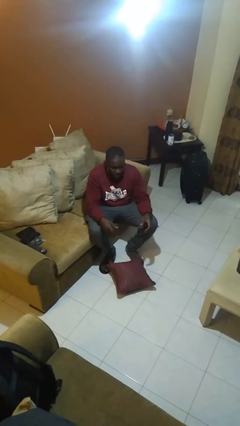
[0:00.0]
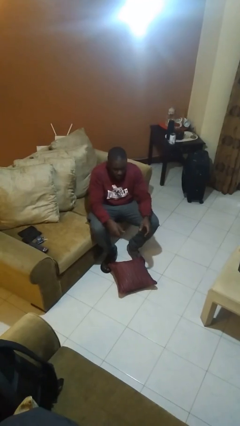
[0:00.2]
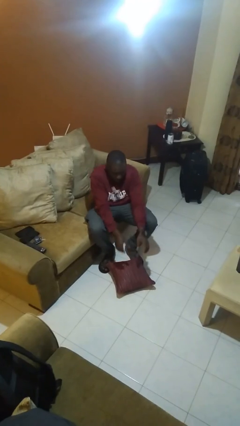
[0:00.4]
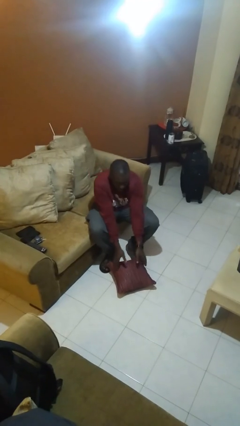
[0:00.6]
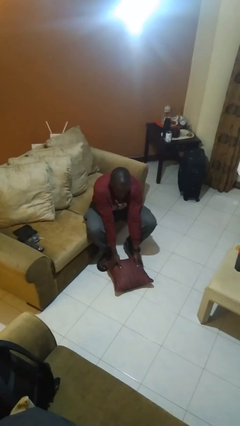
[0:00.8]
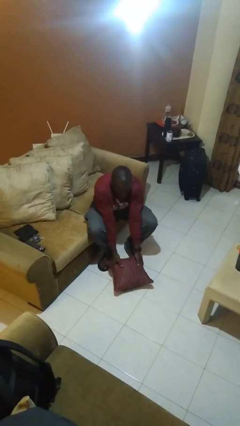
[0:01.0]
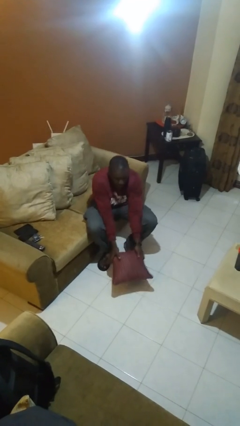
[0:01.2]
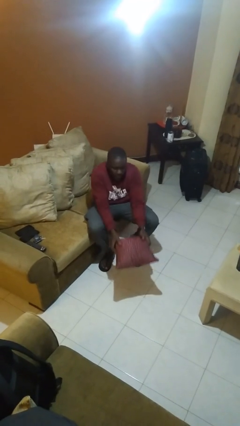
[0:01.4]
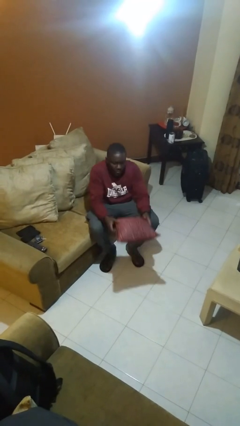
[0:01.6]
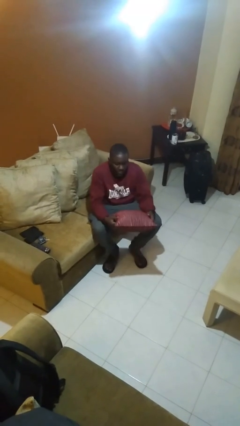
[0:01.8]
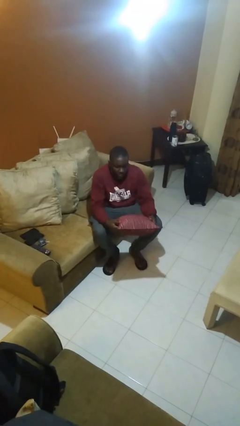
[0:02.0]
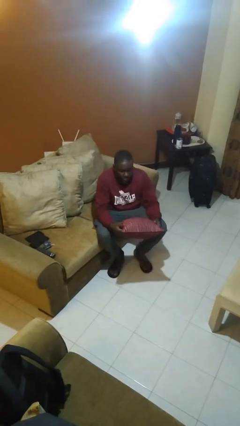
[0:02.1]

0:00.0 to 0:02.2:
person picks up object from floor

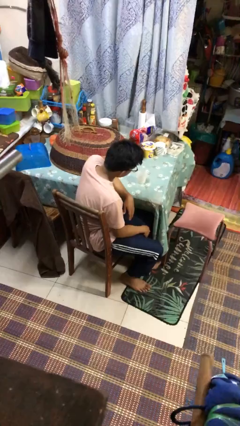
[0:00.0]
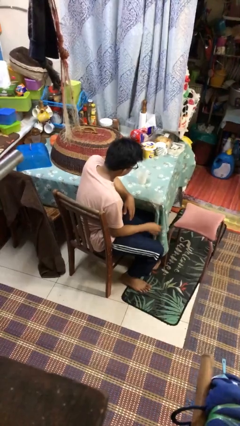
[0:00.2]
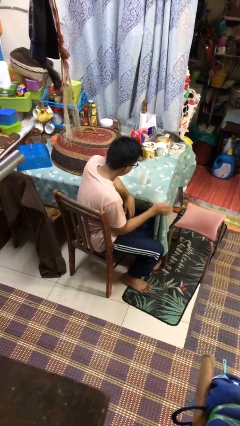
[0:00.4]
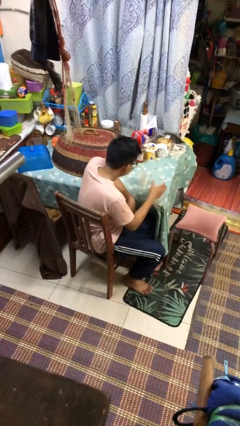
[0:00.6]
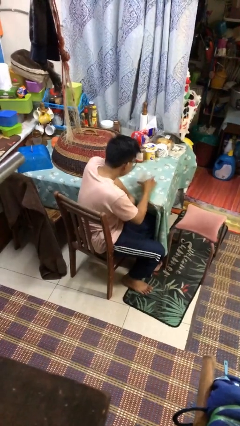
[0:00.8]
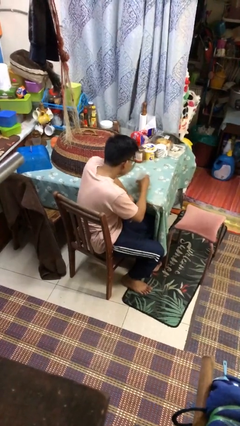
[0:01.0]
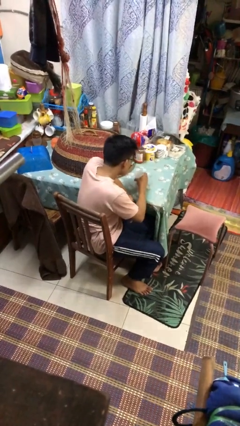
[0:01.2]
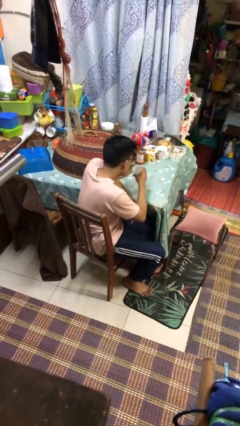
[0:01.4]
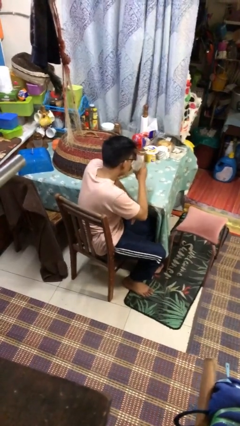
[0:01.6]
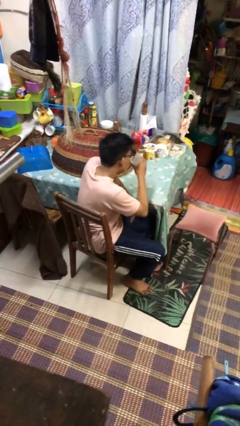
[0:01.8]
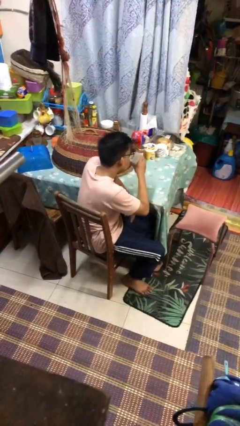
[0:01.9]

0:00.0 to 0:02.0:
person picks up object from table

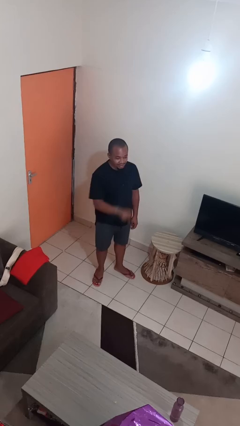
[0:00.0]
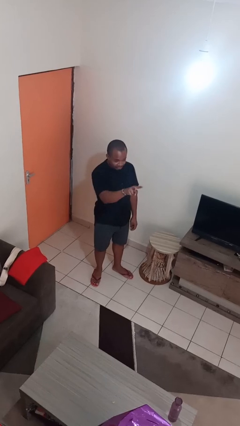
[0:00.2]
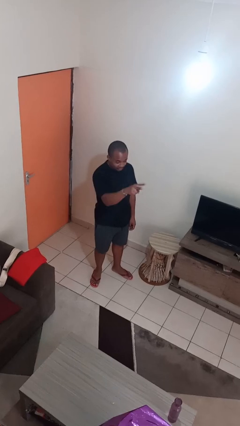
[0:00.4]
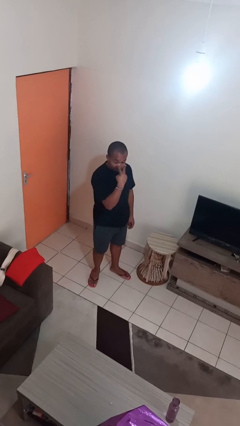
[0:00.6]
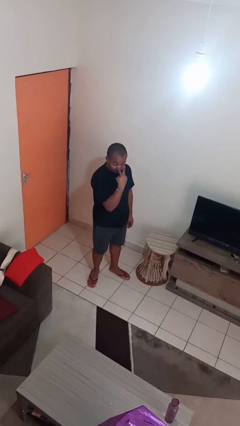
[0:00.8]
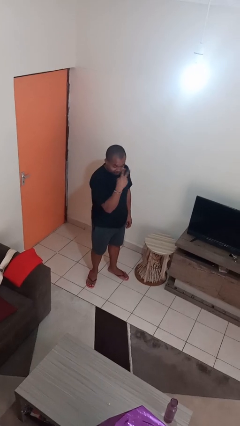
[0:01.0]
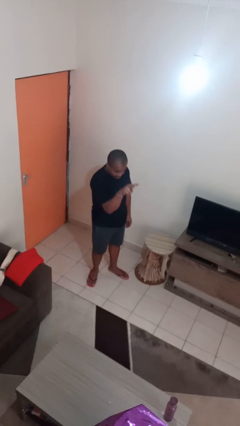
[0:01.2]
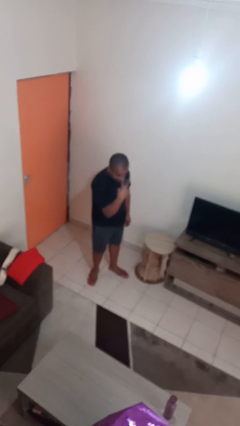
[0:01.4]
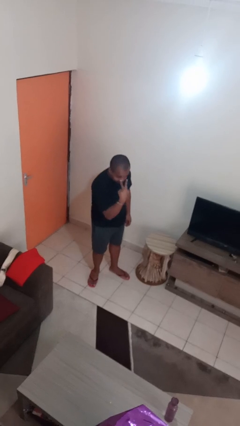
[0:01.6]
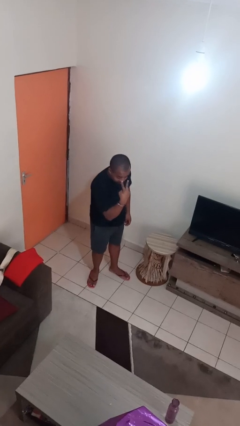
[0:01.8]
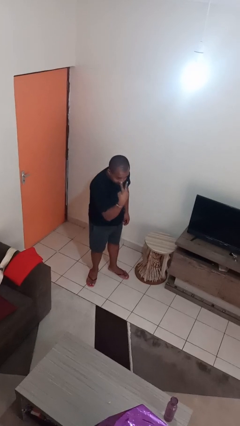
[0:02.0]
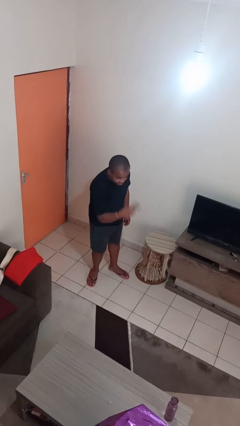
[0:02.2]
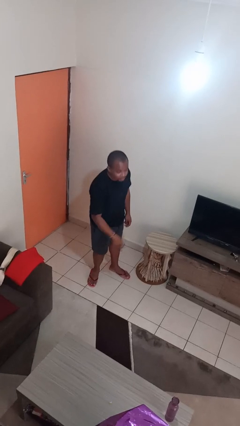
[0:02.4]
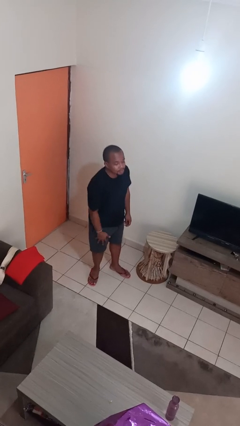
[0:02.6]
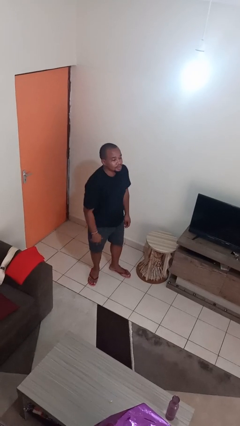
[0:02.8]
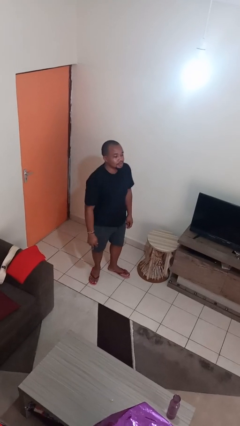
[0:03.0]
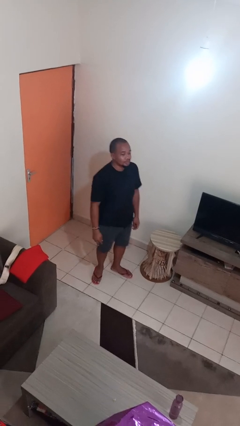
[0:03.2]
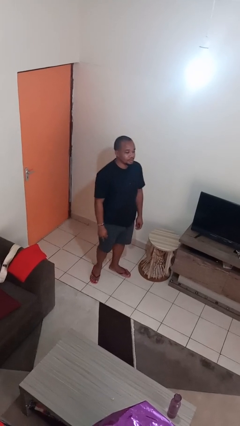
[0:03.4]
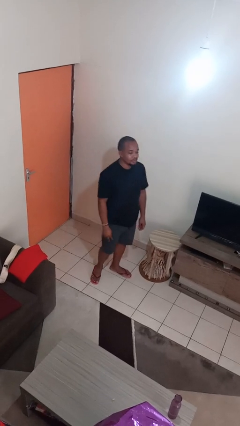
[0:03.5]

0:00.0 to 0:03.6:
person gestures watch closely

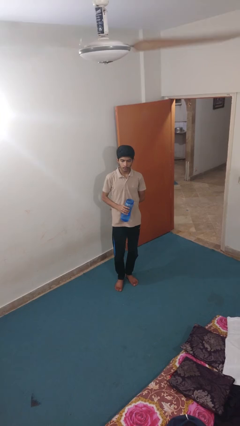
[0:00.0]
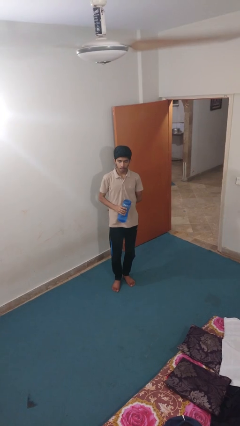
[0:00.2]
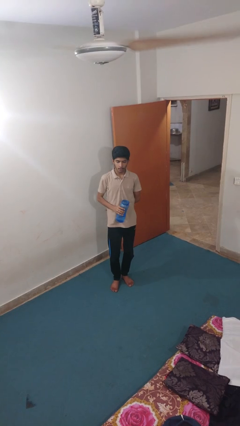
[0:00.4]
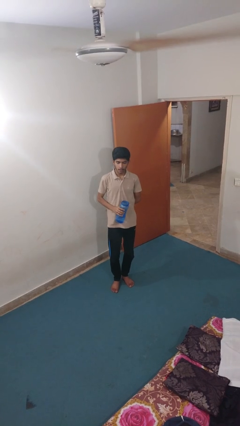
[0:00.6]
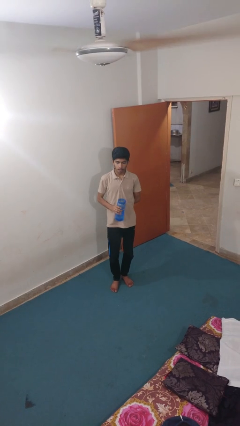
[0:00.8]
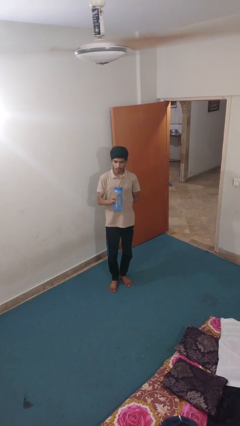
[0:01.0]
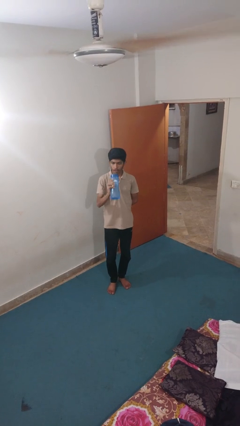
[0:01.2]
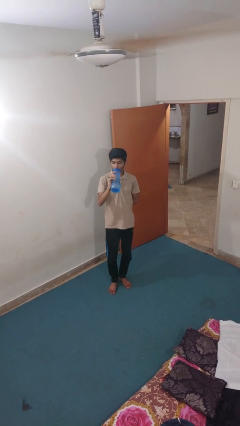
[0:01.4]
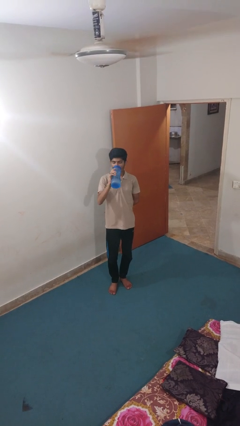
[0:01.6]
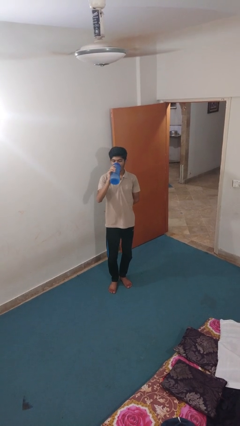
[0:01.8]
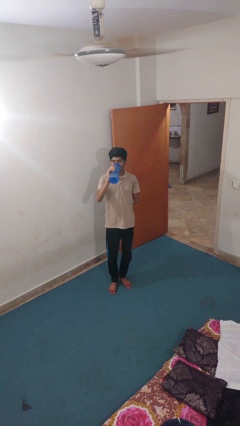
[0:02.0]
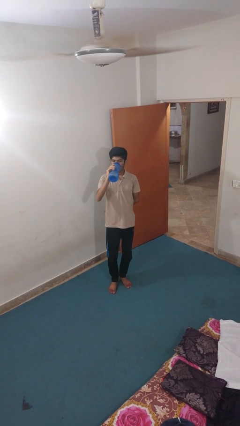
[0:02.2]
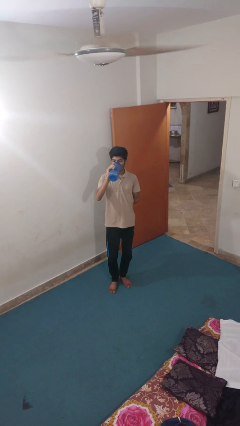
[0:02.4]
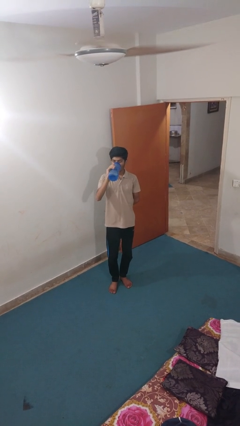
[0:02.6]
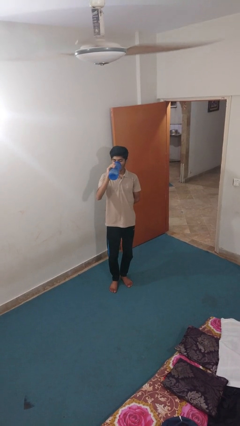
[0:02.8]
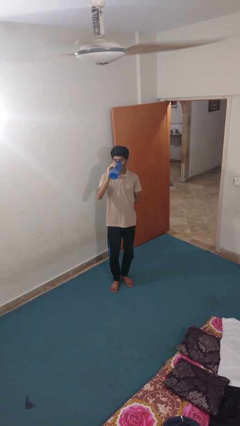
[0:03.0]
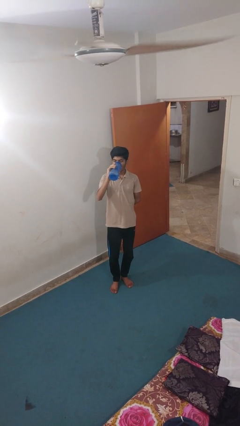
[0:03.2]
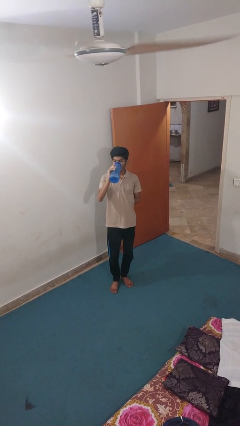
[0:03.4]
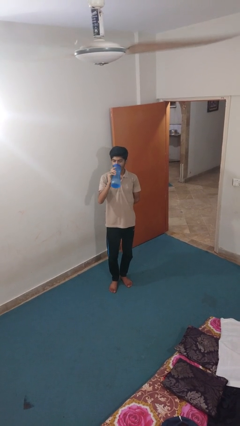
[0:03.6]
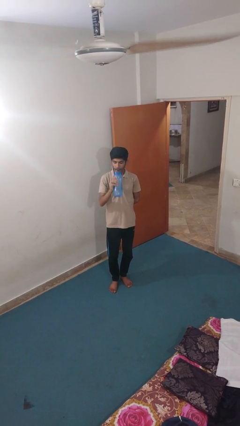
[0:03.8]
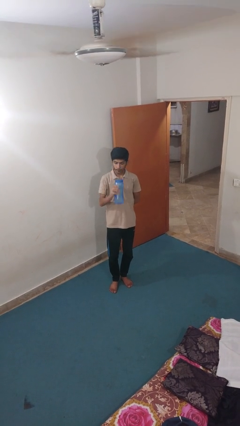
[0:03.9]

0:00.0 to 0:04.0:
person drinks from bottle

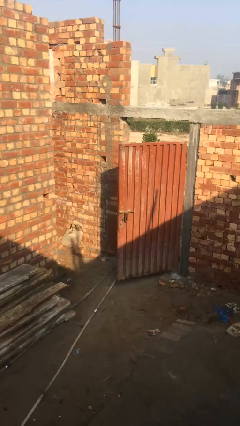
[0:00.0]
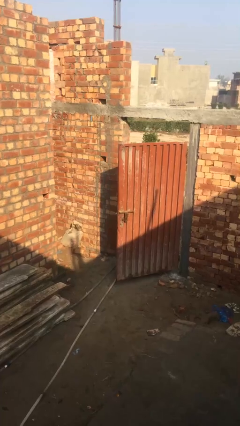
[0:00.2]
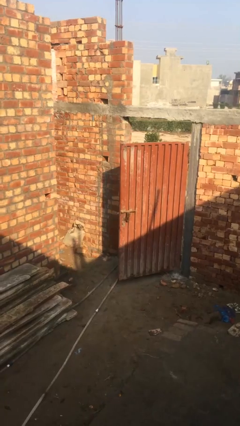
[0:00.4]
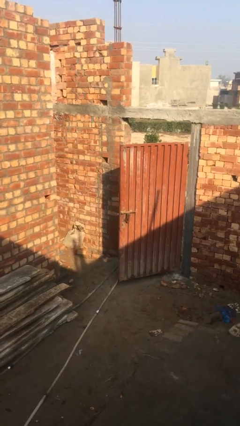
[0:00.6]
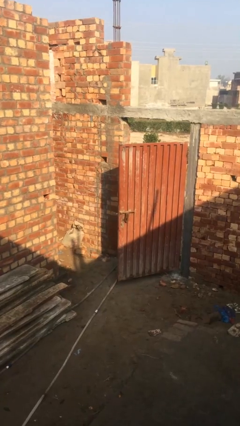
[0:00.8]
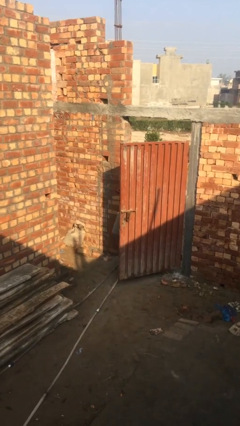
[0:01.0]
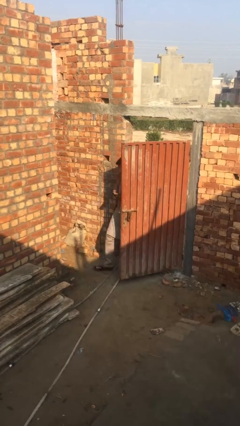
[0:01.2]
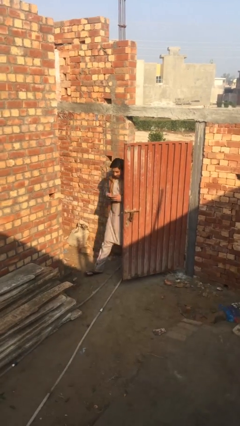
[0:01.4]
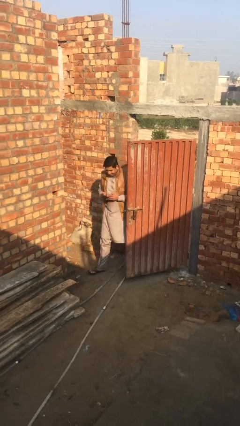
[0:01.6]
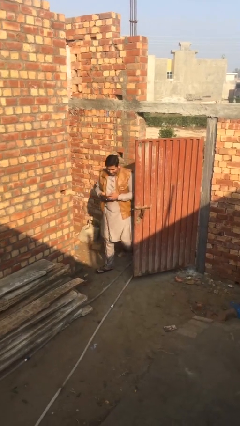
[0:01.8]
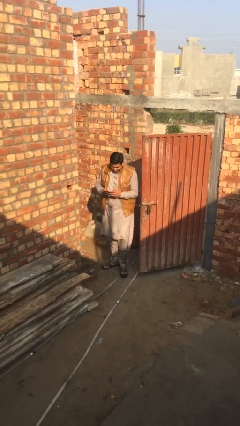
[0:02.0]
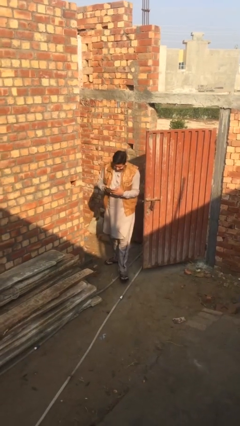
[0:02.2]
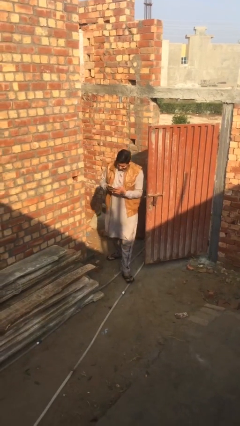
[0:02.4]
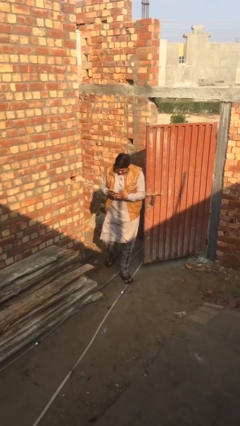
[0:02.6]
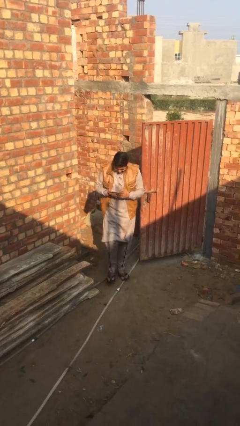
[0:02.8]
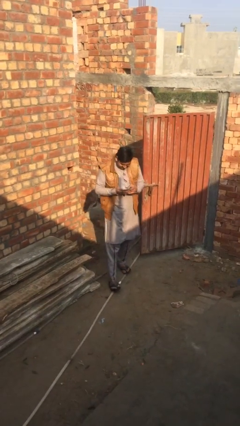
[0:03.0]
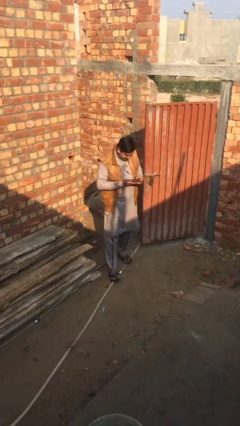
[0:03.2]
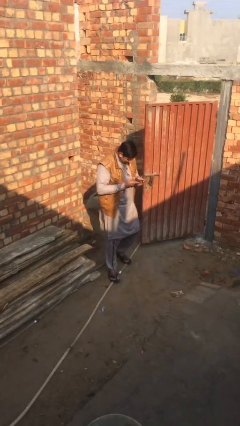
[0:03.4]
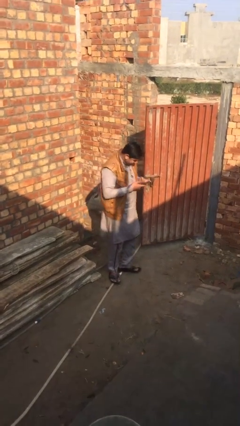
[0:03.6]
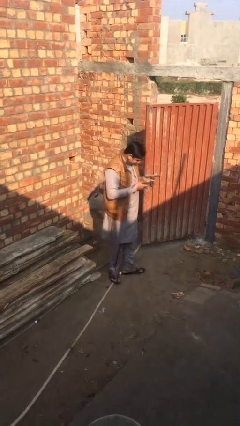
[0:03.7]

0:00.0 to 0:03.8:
person enters scene through structure

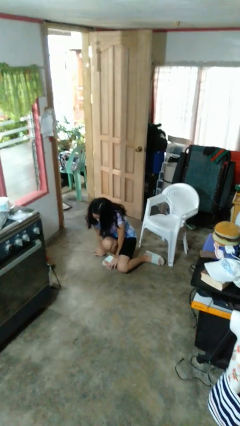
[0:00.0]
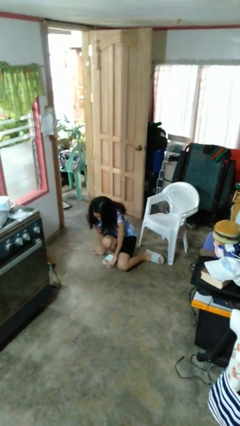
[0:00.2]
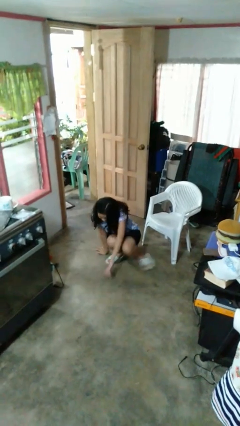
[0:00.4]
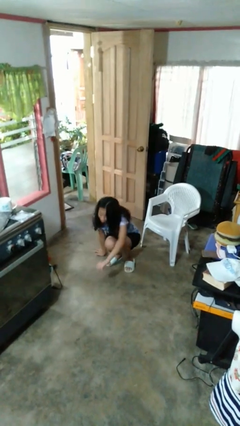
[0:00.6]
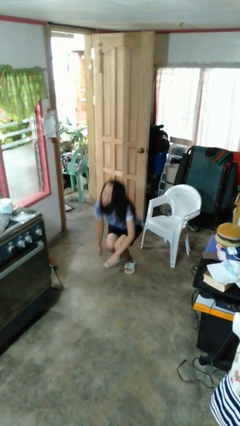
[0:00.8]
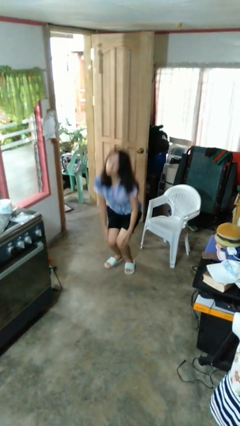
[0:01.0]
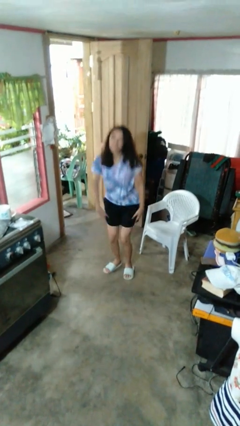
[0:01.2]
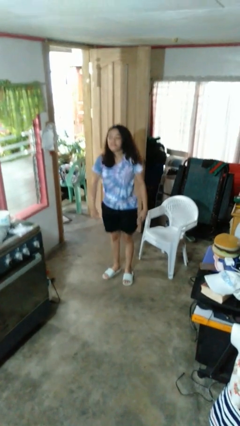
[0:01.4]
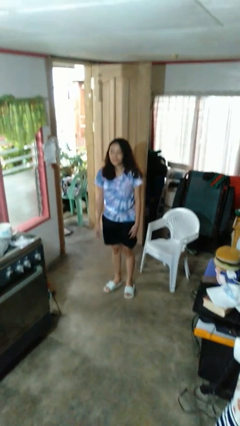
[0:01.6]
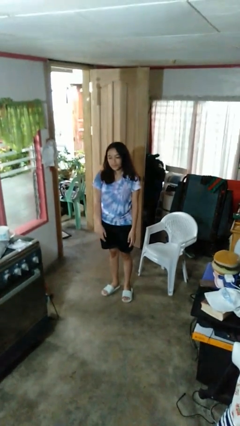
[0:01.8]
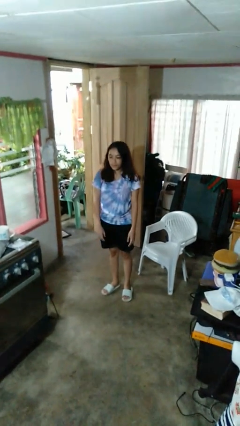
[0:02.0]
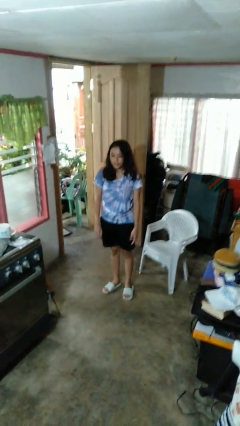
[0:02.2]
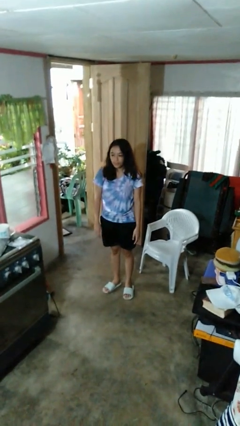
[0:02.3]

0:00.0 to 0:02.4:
person stands up from floor
